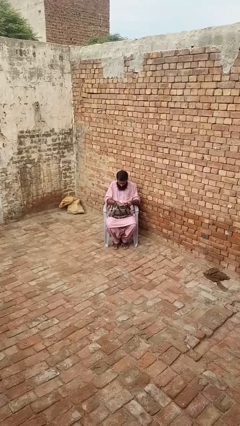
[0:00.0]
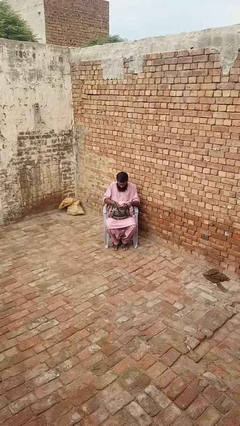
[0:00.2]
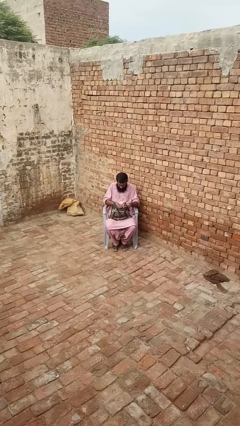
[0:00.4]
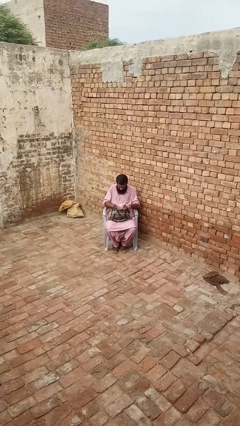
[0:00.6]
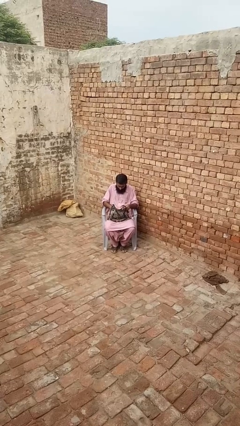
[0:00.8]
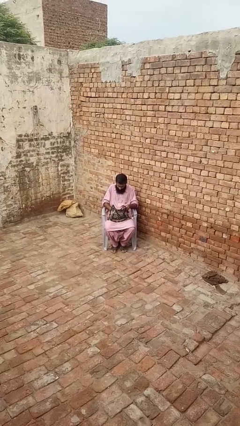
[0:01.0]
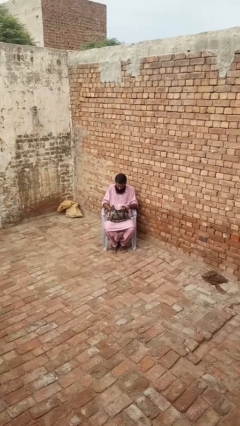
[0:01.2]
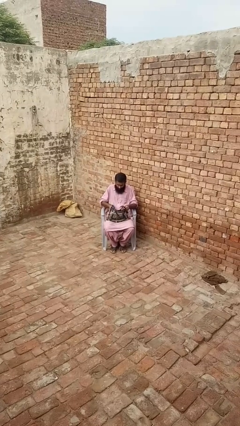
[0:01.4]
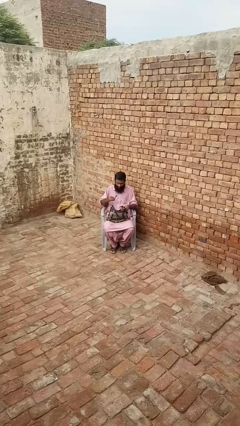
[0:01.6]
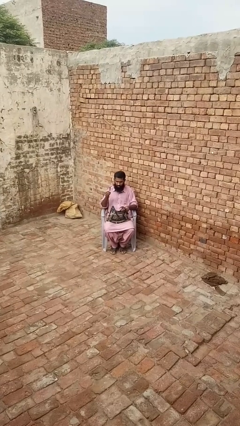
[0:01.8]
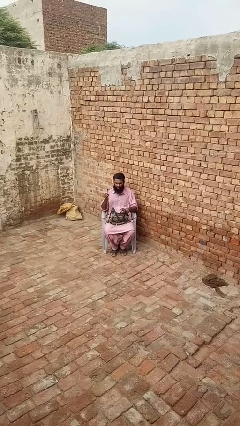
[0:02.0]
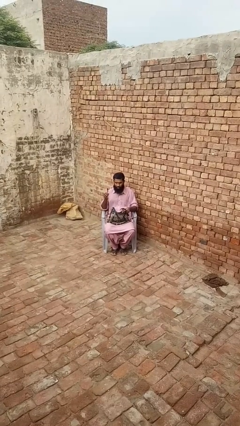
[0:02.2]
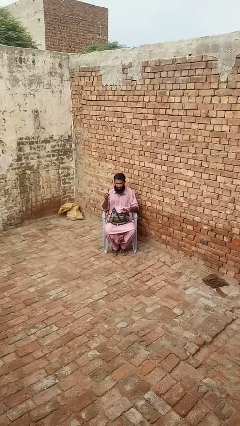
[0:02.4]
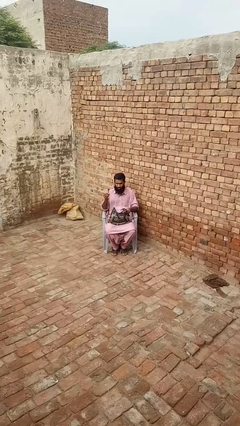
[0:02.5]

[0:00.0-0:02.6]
person takes object from purse

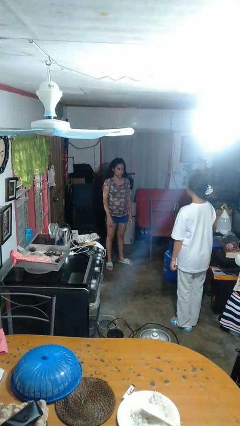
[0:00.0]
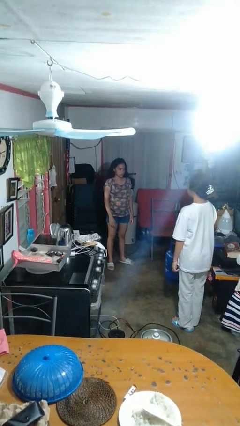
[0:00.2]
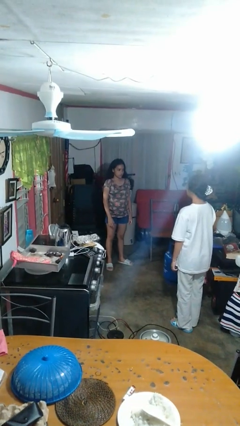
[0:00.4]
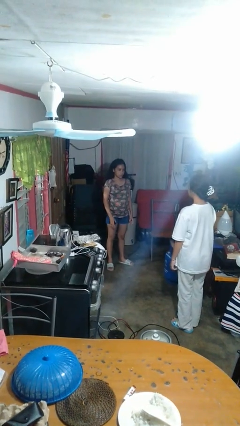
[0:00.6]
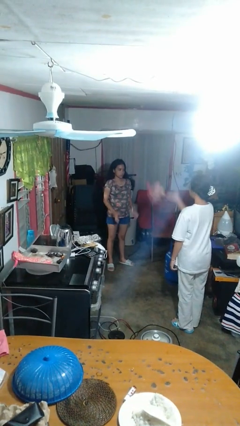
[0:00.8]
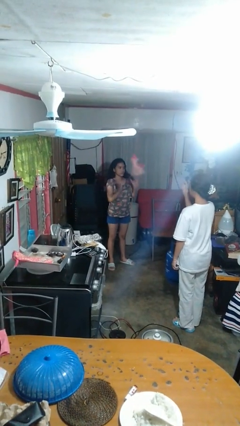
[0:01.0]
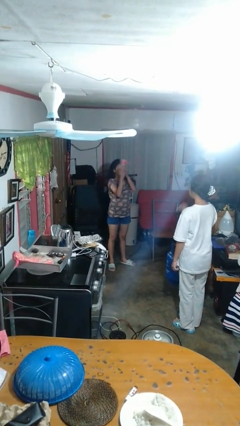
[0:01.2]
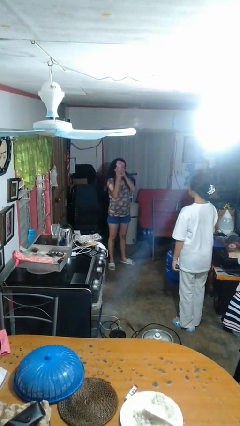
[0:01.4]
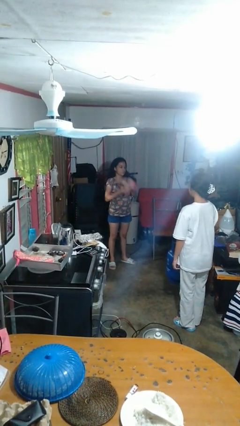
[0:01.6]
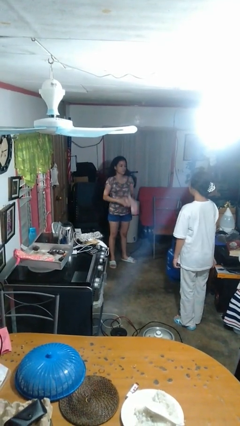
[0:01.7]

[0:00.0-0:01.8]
person catches object from person

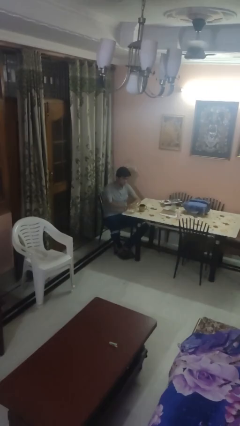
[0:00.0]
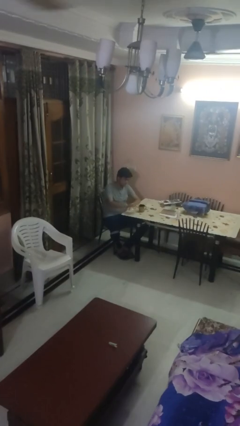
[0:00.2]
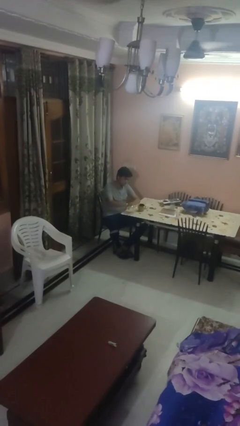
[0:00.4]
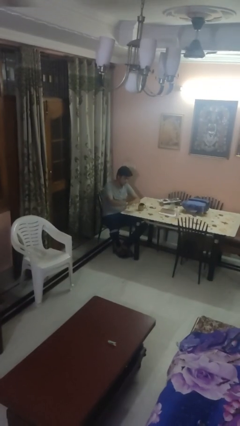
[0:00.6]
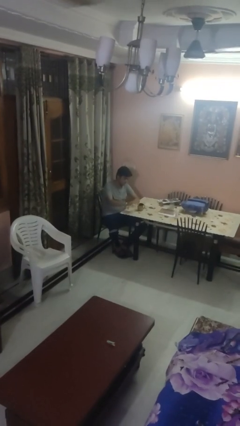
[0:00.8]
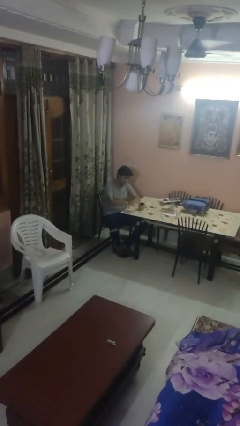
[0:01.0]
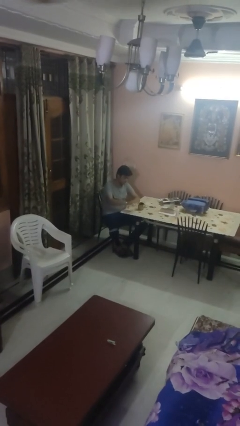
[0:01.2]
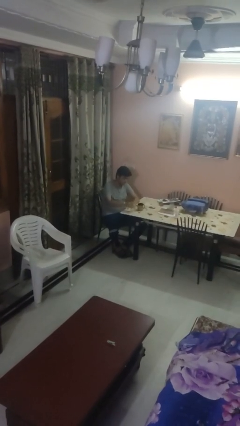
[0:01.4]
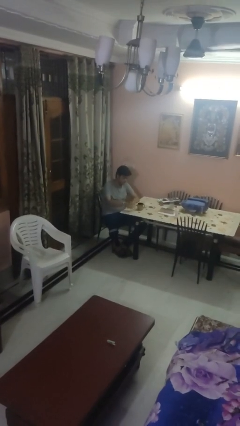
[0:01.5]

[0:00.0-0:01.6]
person pours liquid into cup

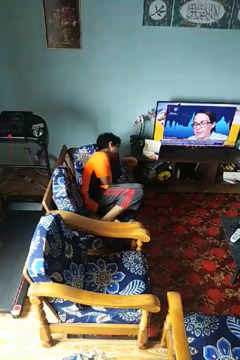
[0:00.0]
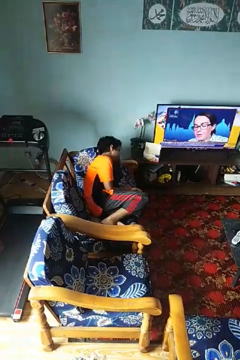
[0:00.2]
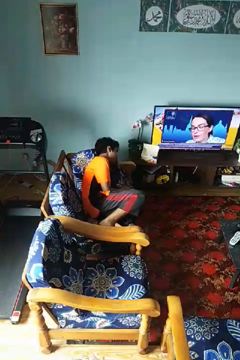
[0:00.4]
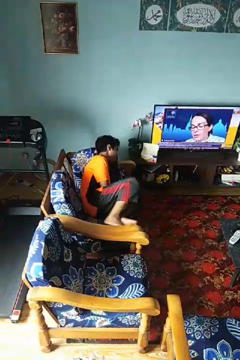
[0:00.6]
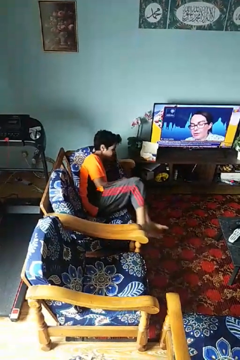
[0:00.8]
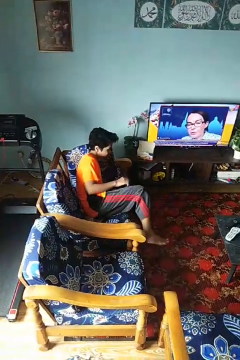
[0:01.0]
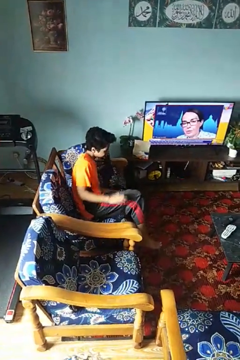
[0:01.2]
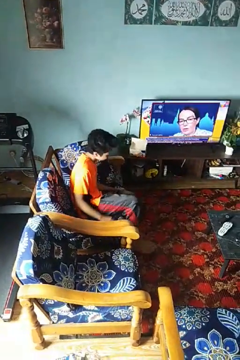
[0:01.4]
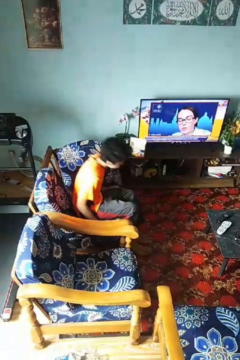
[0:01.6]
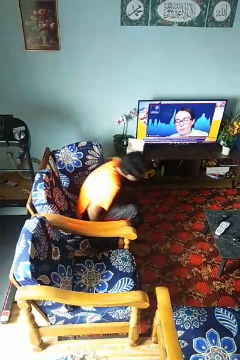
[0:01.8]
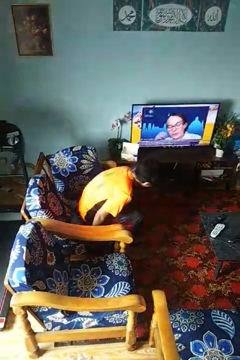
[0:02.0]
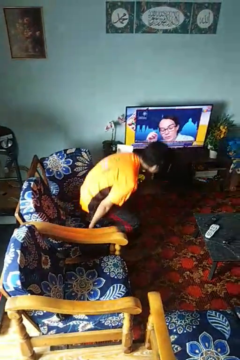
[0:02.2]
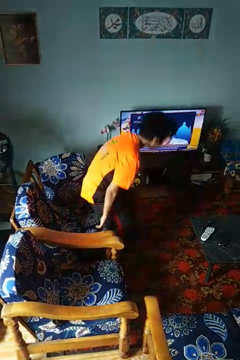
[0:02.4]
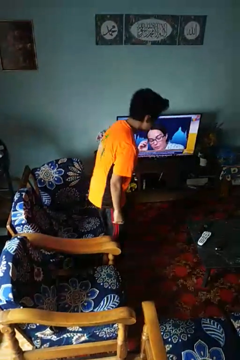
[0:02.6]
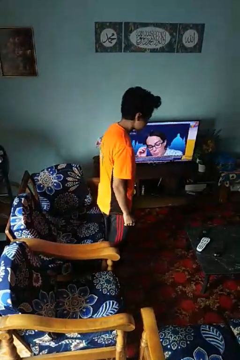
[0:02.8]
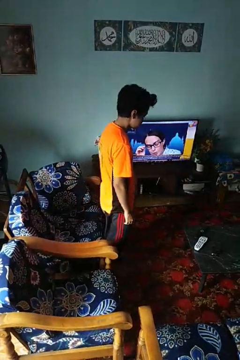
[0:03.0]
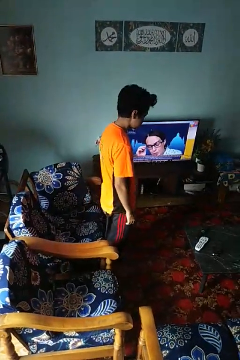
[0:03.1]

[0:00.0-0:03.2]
person stands up

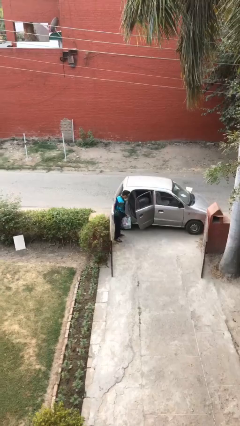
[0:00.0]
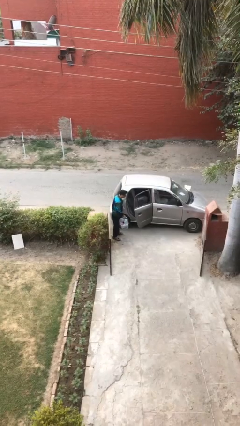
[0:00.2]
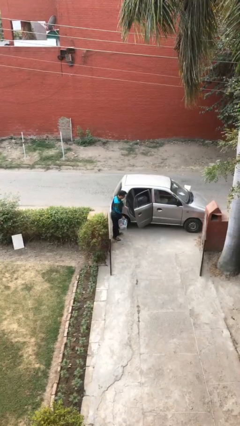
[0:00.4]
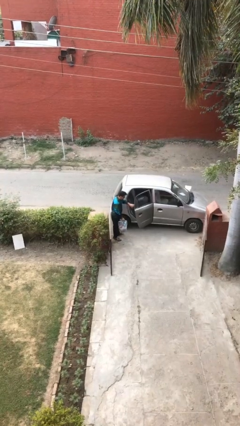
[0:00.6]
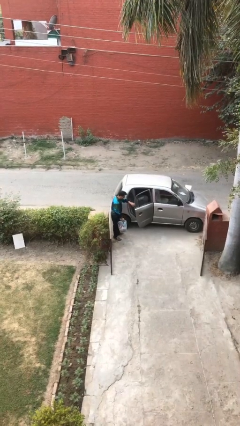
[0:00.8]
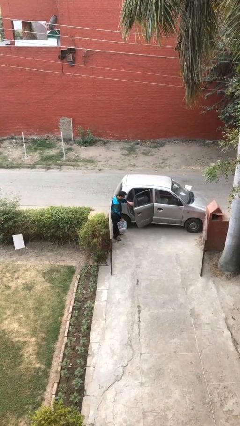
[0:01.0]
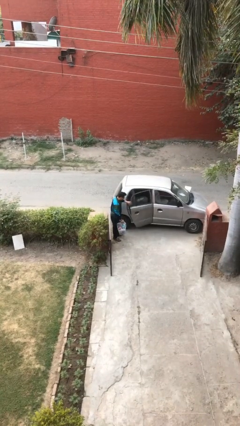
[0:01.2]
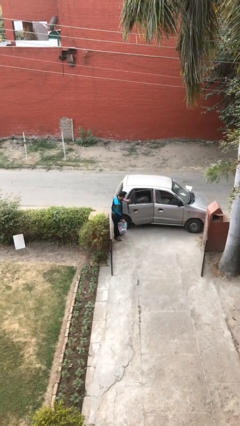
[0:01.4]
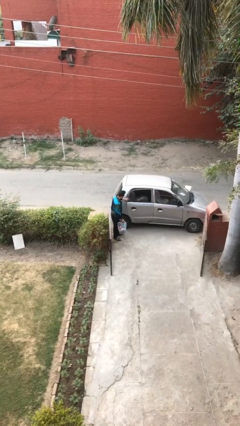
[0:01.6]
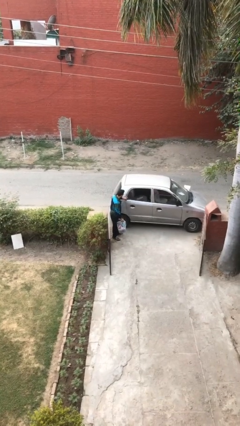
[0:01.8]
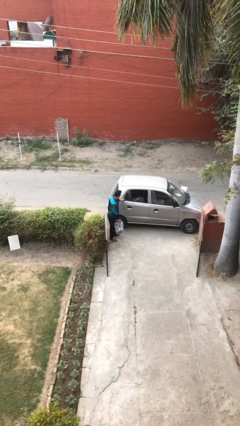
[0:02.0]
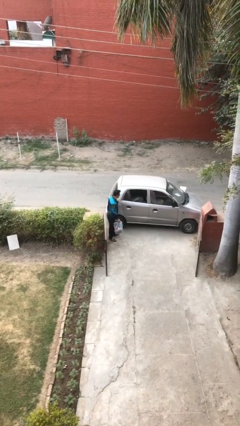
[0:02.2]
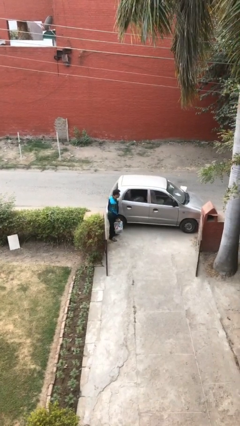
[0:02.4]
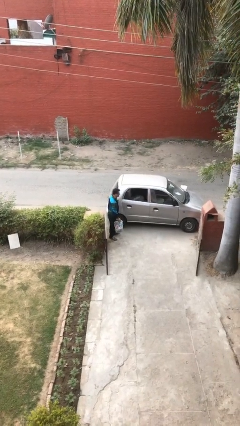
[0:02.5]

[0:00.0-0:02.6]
person closes car door

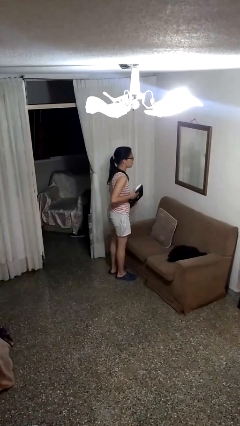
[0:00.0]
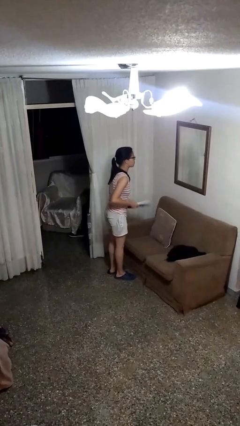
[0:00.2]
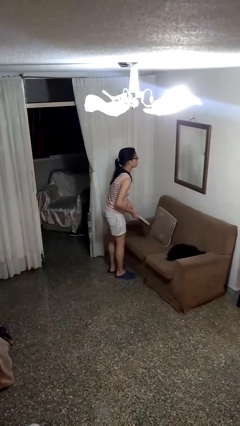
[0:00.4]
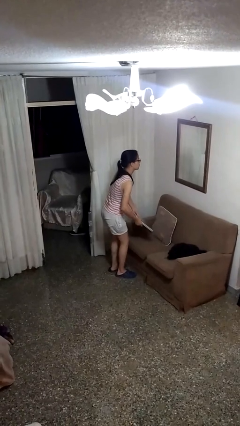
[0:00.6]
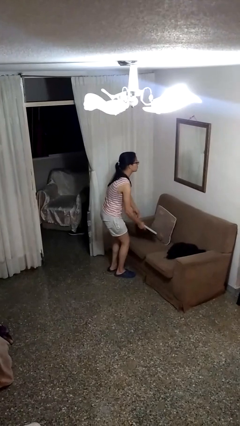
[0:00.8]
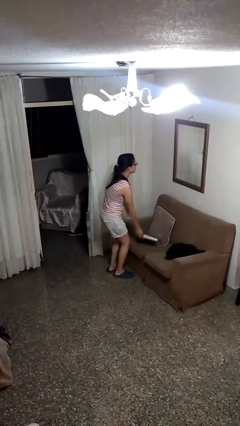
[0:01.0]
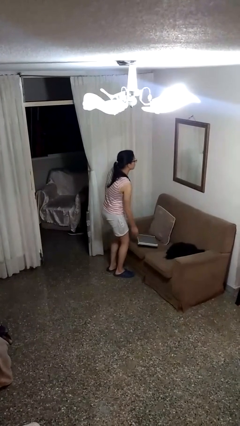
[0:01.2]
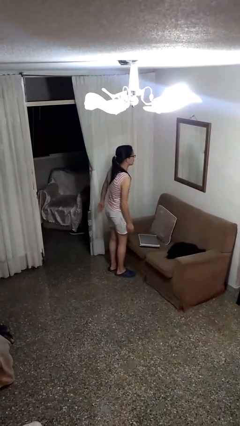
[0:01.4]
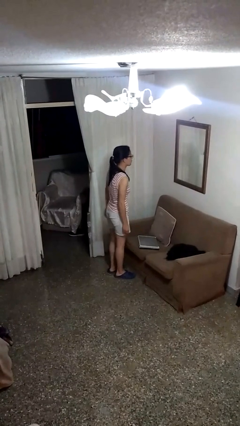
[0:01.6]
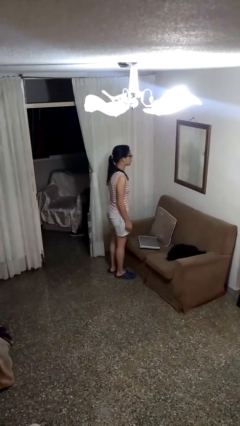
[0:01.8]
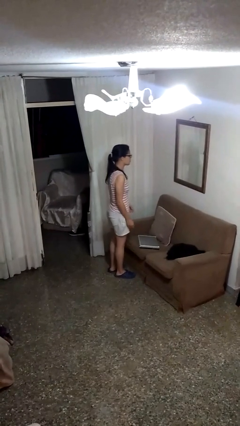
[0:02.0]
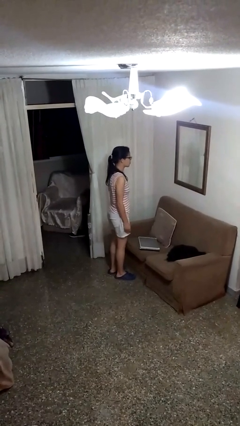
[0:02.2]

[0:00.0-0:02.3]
person puts down object on couch

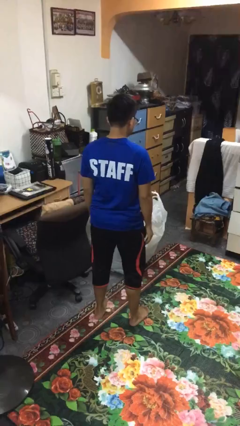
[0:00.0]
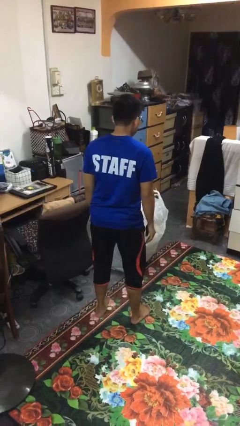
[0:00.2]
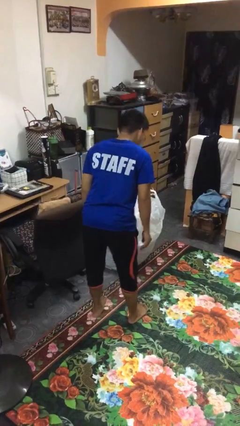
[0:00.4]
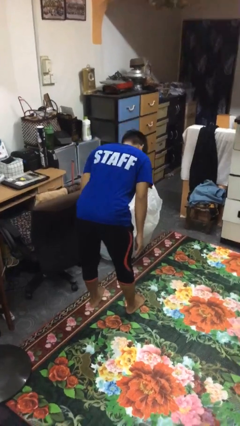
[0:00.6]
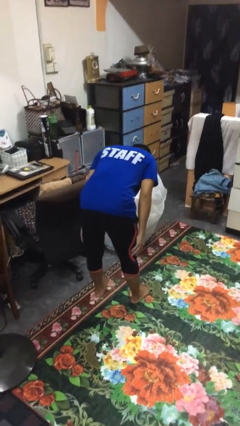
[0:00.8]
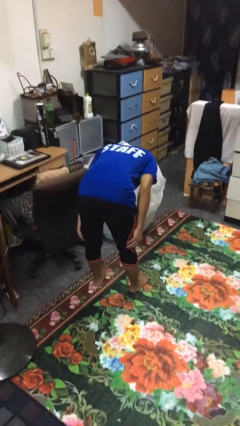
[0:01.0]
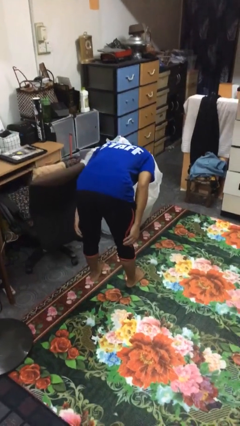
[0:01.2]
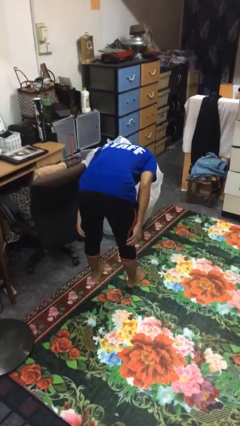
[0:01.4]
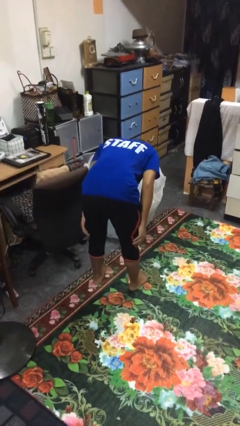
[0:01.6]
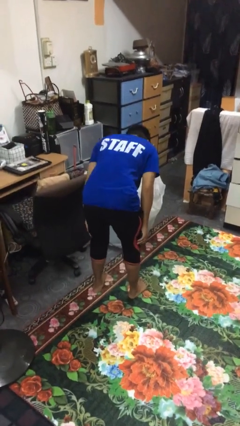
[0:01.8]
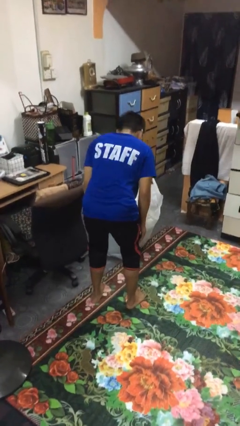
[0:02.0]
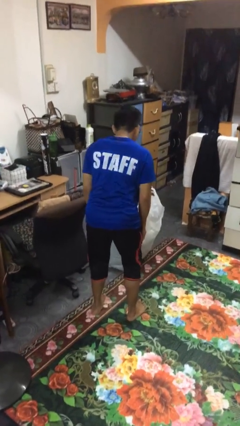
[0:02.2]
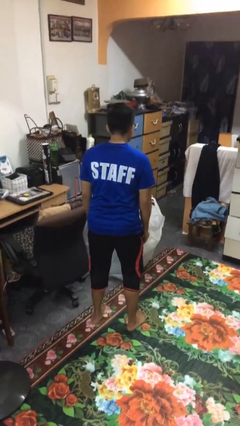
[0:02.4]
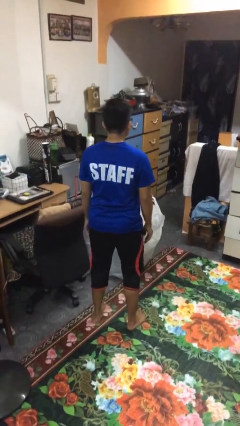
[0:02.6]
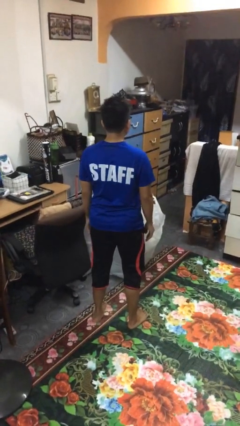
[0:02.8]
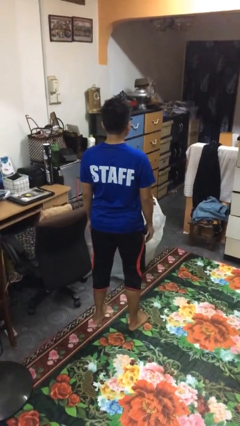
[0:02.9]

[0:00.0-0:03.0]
person bows

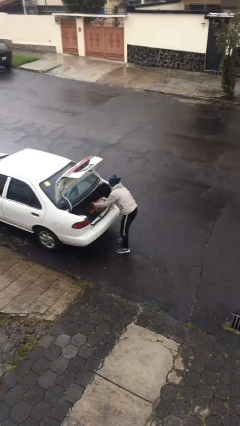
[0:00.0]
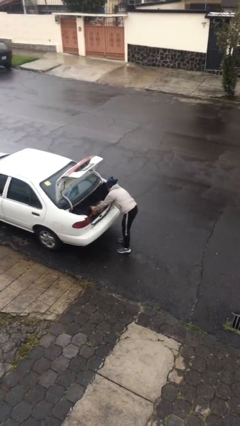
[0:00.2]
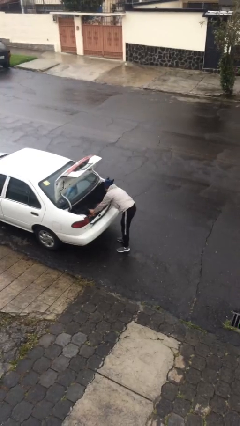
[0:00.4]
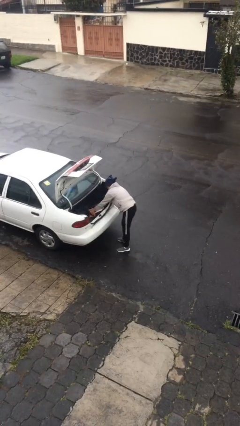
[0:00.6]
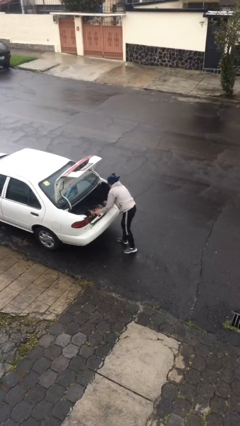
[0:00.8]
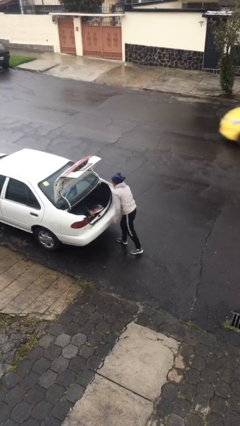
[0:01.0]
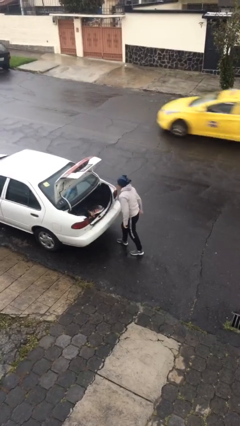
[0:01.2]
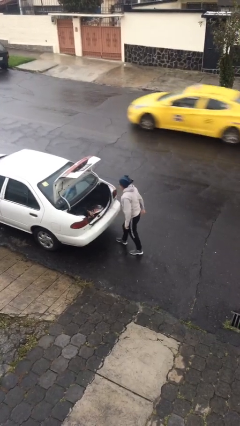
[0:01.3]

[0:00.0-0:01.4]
person loads car
